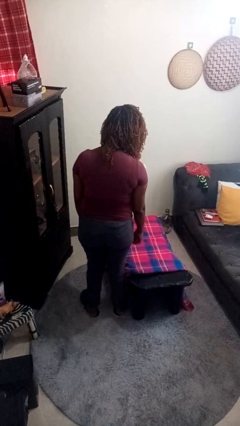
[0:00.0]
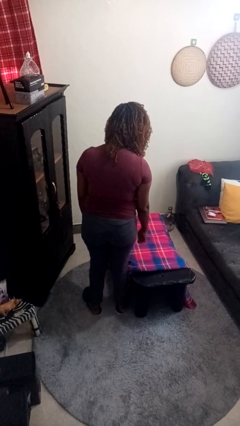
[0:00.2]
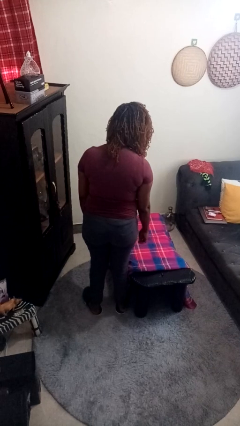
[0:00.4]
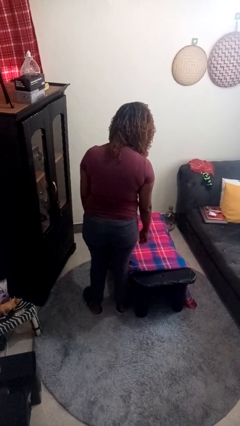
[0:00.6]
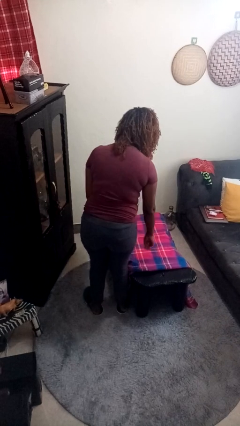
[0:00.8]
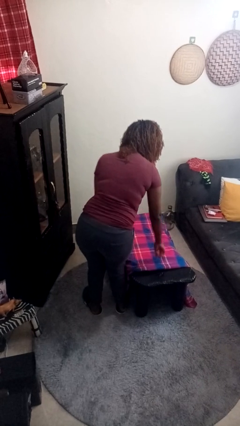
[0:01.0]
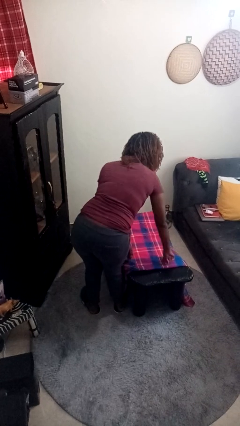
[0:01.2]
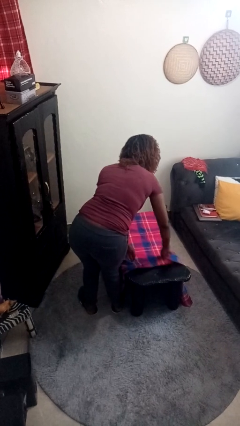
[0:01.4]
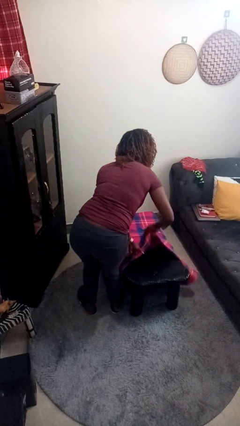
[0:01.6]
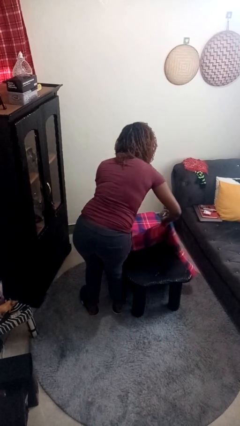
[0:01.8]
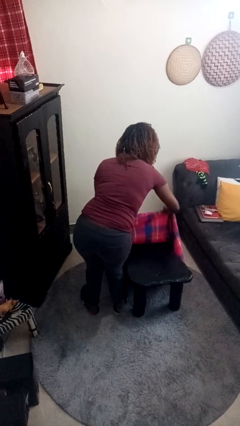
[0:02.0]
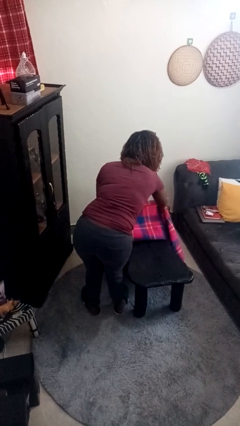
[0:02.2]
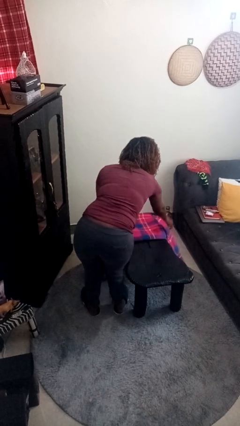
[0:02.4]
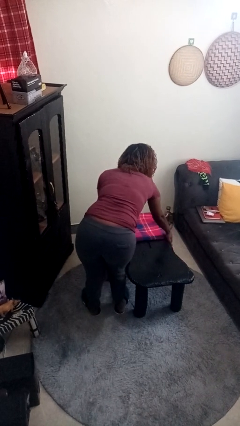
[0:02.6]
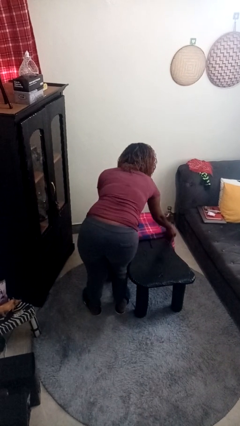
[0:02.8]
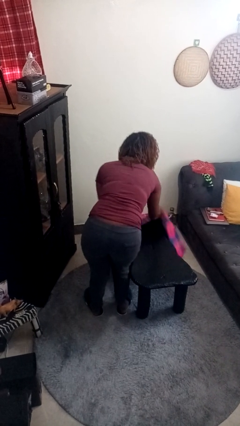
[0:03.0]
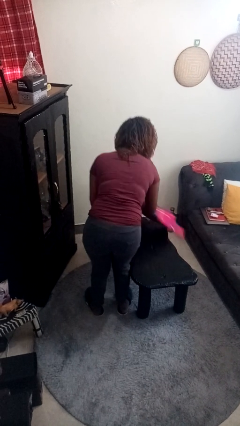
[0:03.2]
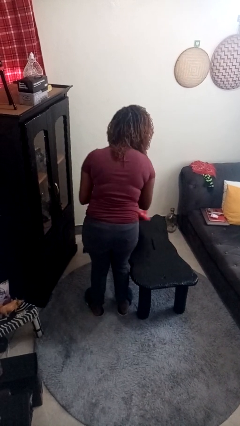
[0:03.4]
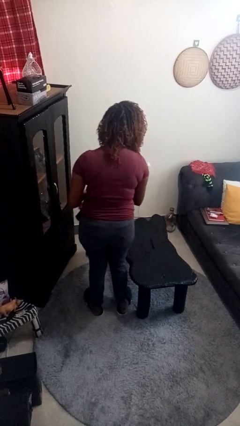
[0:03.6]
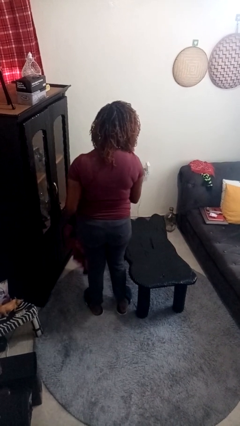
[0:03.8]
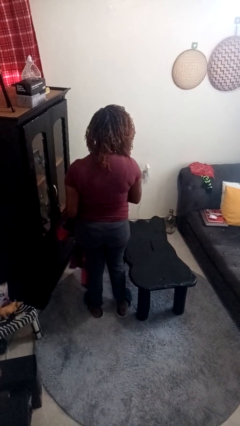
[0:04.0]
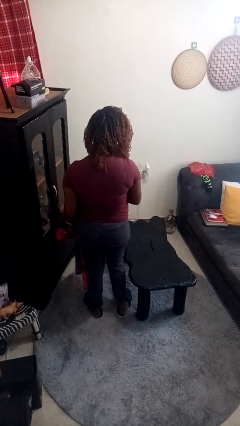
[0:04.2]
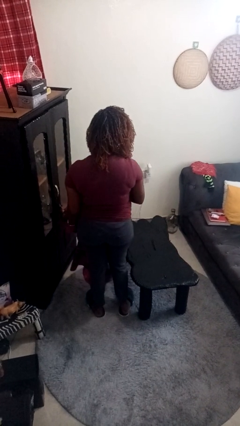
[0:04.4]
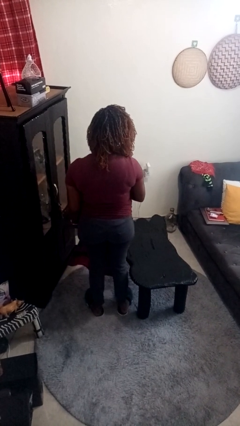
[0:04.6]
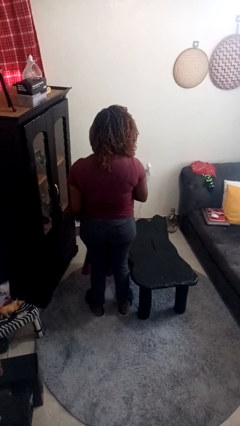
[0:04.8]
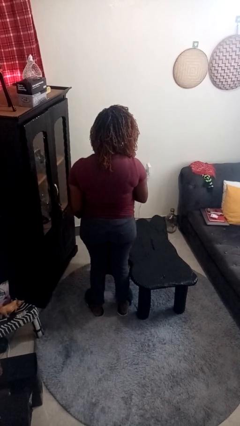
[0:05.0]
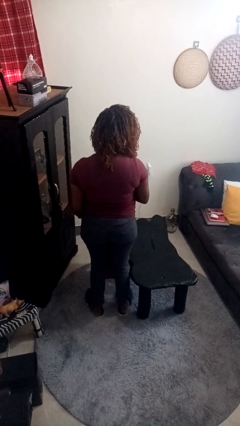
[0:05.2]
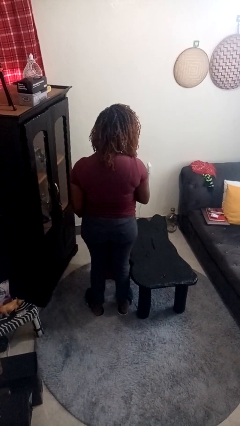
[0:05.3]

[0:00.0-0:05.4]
person folds tablecloth

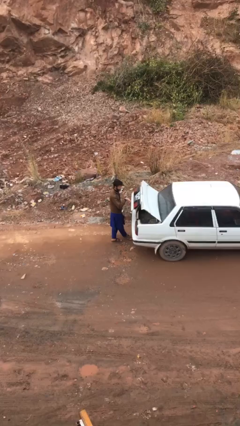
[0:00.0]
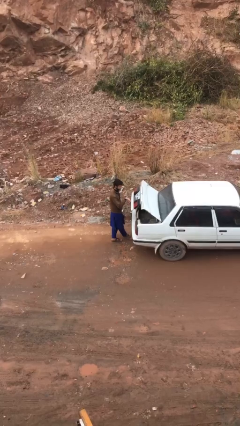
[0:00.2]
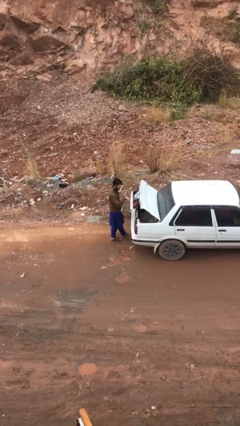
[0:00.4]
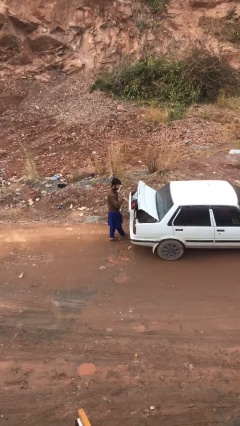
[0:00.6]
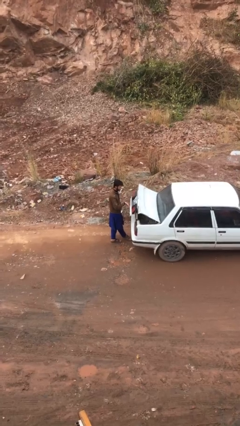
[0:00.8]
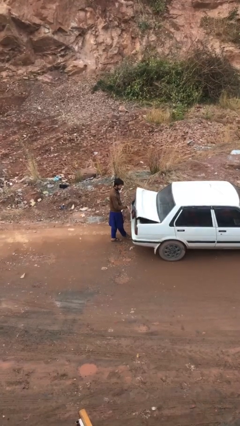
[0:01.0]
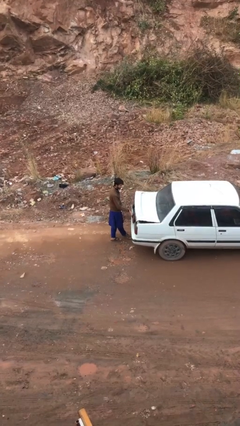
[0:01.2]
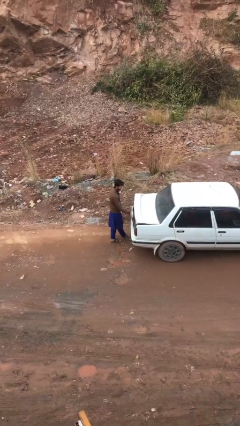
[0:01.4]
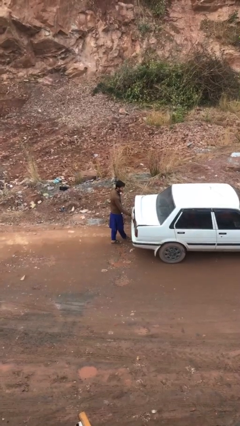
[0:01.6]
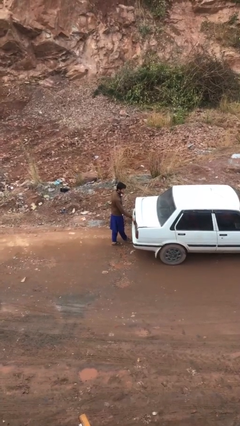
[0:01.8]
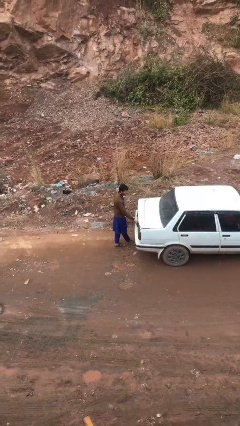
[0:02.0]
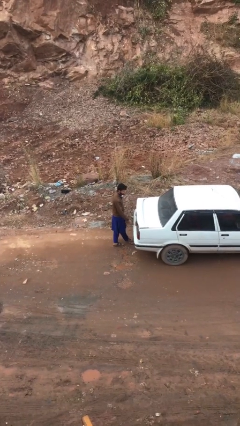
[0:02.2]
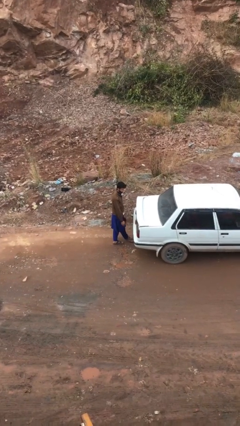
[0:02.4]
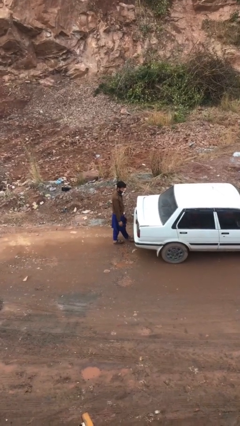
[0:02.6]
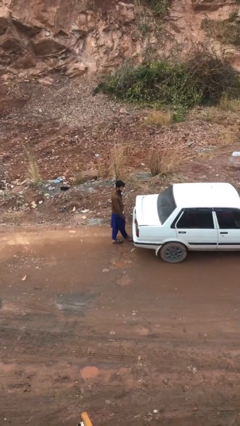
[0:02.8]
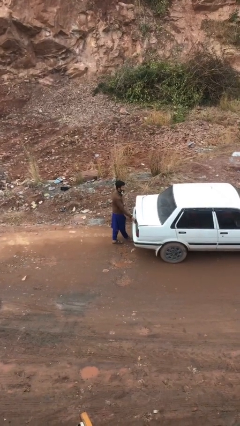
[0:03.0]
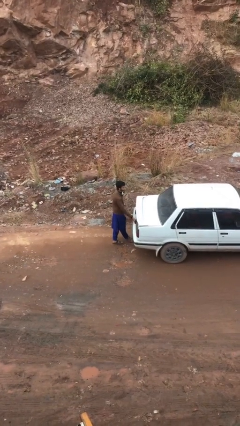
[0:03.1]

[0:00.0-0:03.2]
person closes car trunk

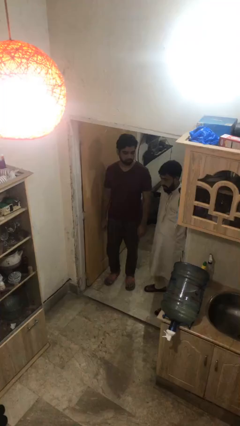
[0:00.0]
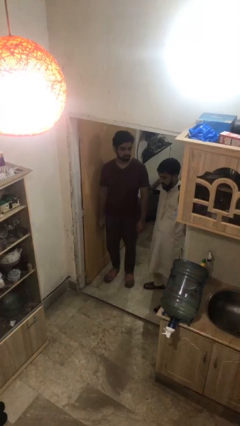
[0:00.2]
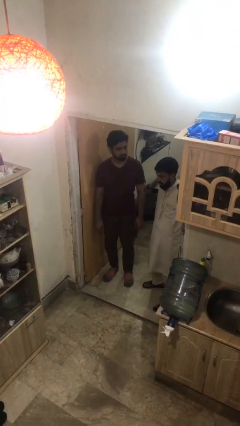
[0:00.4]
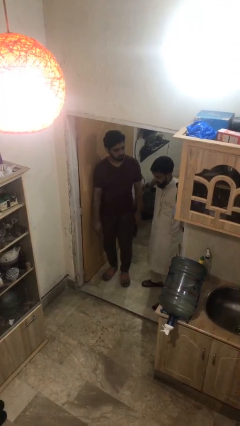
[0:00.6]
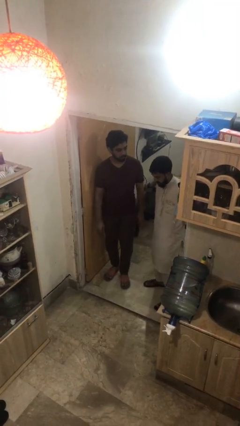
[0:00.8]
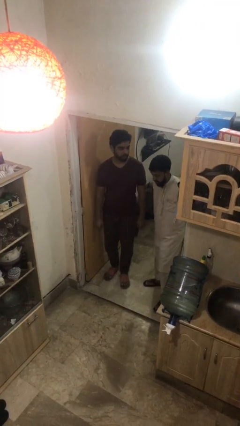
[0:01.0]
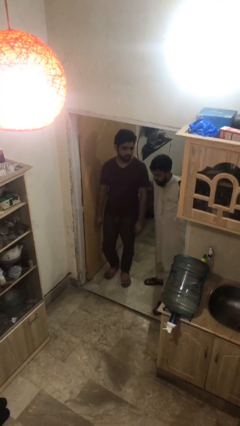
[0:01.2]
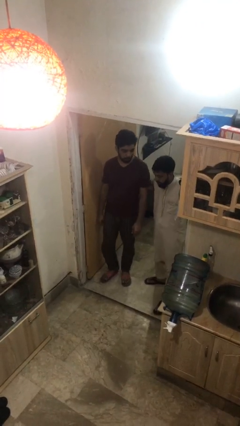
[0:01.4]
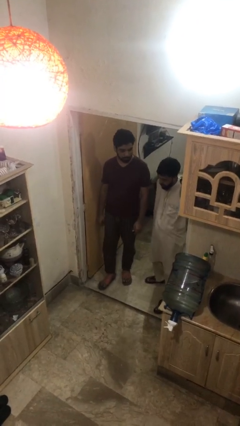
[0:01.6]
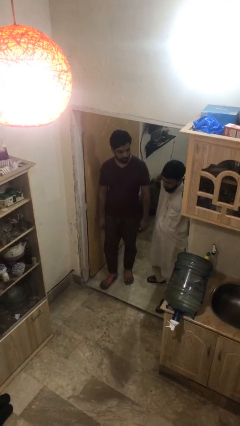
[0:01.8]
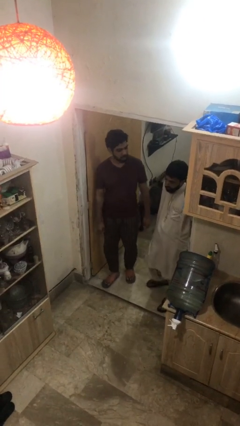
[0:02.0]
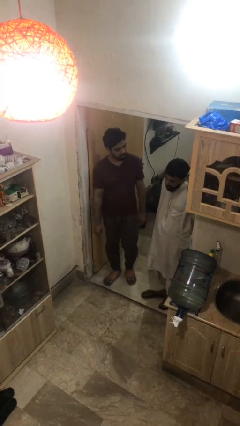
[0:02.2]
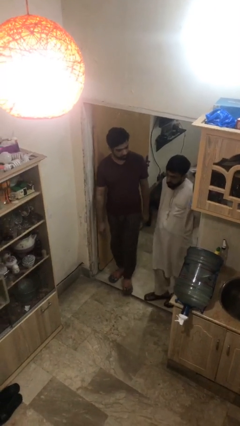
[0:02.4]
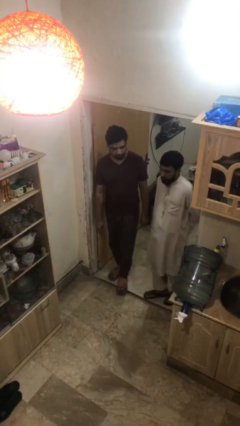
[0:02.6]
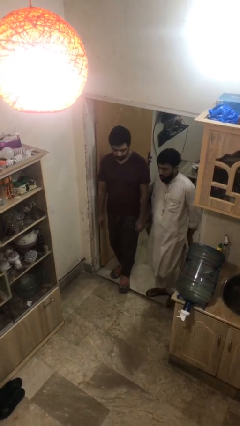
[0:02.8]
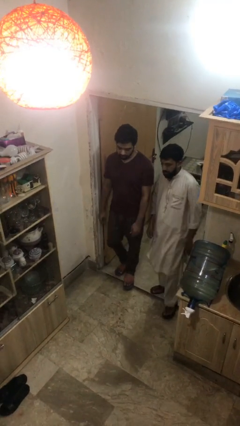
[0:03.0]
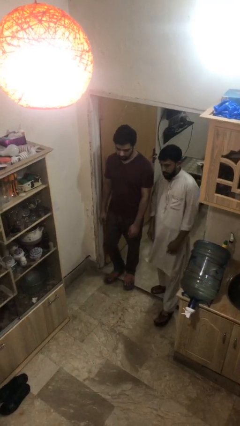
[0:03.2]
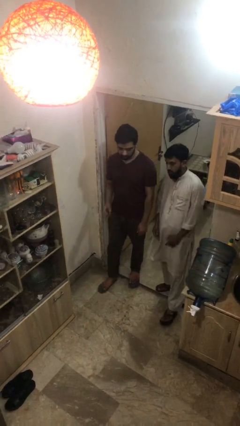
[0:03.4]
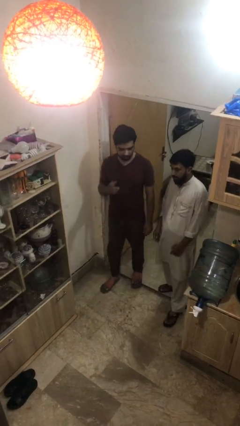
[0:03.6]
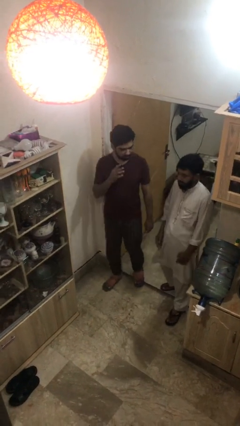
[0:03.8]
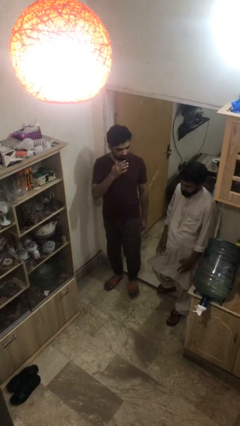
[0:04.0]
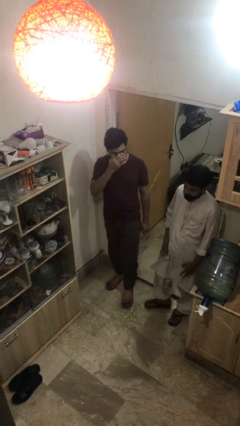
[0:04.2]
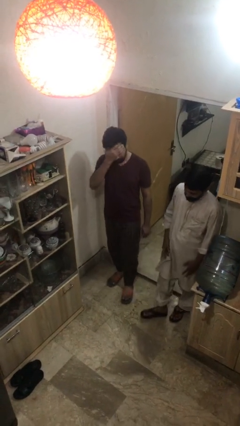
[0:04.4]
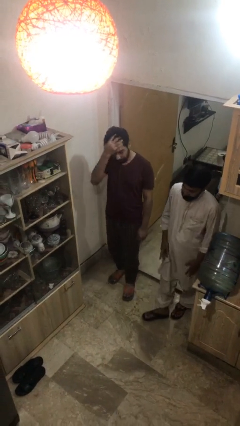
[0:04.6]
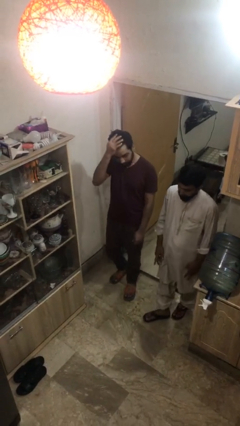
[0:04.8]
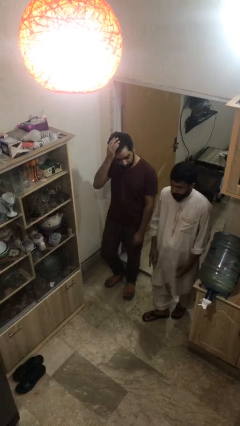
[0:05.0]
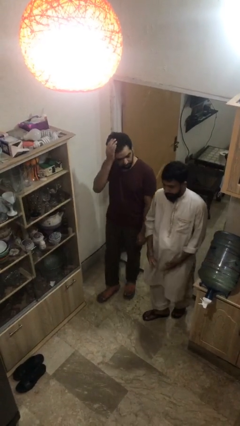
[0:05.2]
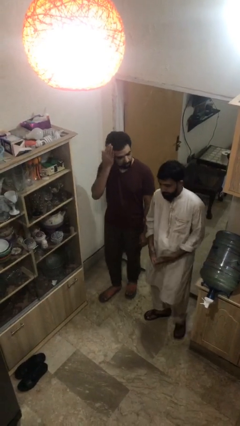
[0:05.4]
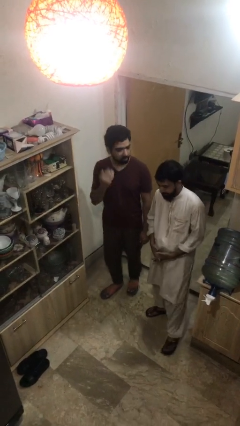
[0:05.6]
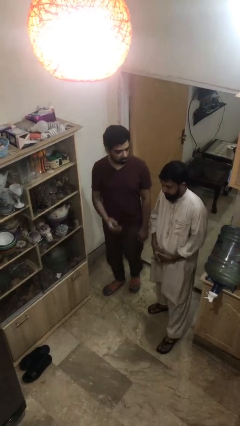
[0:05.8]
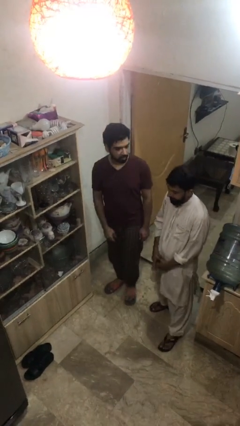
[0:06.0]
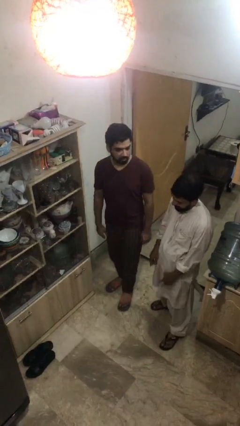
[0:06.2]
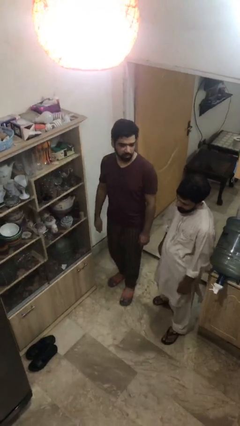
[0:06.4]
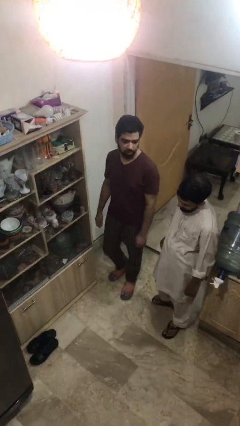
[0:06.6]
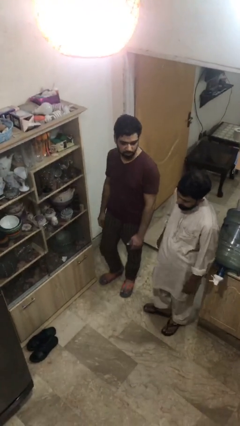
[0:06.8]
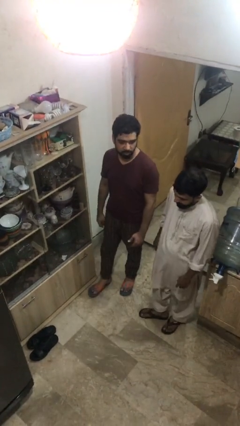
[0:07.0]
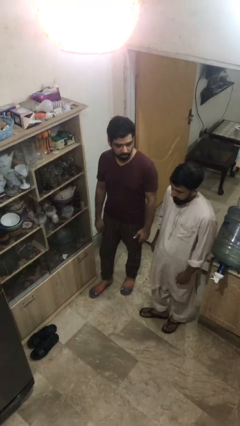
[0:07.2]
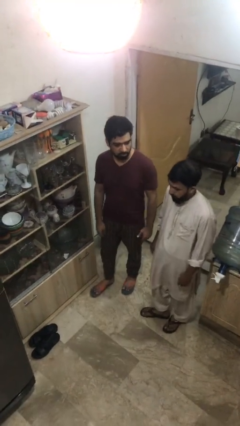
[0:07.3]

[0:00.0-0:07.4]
person talks to person

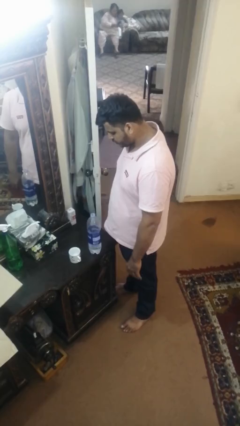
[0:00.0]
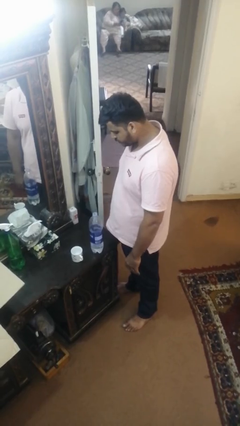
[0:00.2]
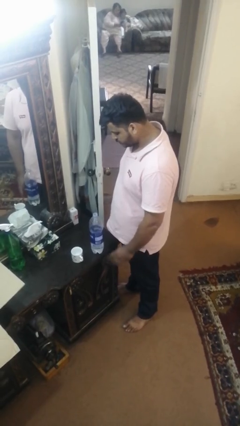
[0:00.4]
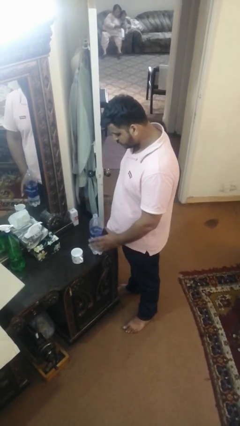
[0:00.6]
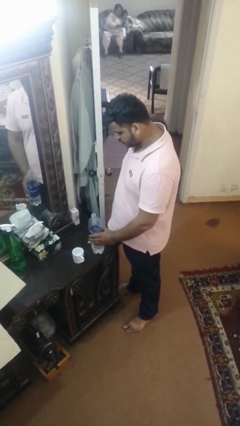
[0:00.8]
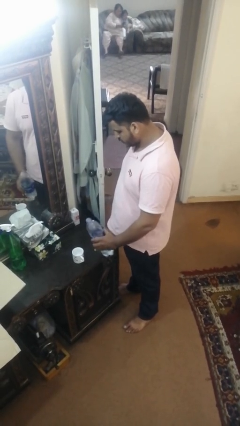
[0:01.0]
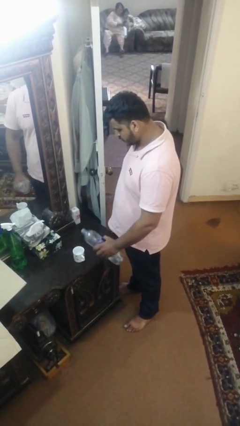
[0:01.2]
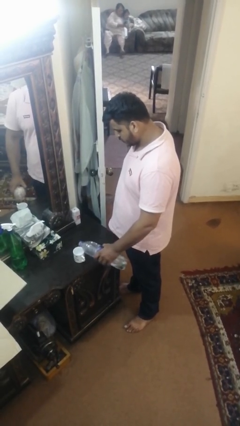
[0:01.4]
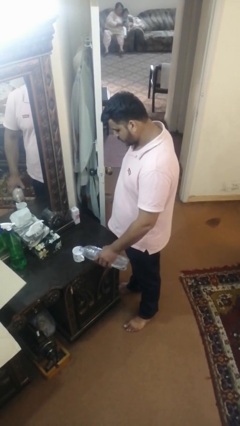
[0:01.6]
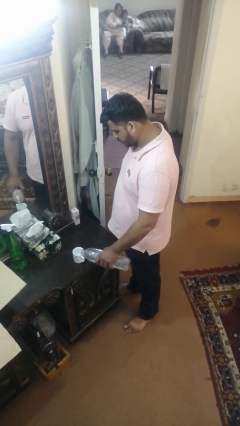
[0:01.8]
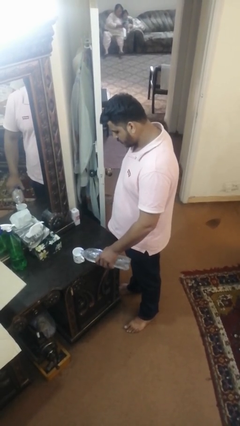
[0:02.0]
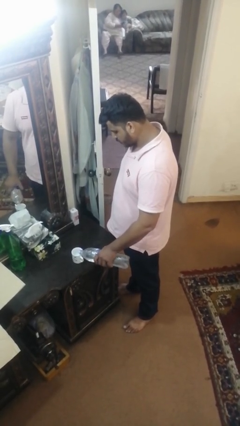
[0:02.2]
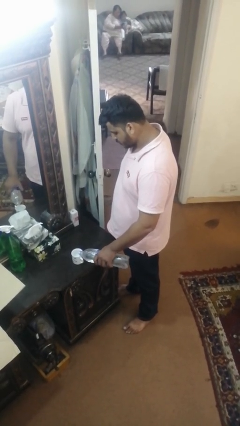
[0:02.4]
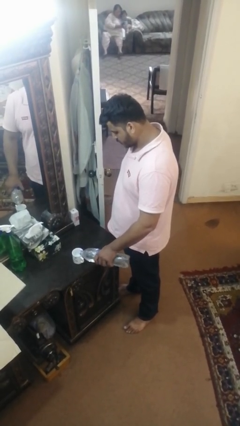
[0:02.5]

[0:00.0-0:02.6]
person pours liquid into cup
